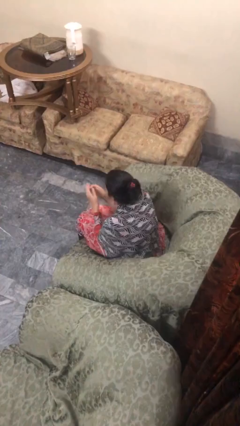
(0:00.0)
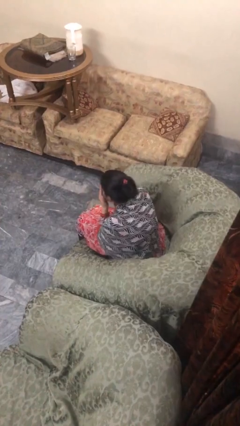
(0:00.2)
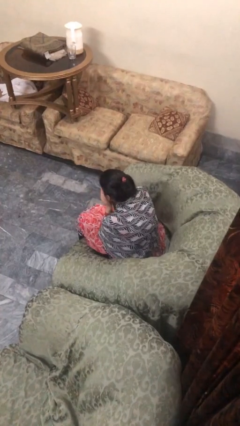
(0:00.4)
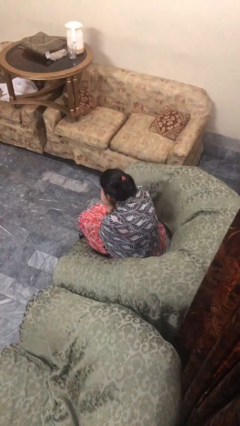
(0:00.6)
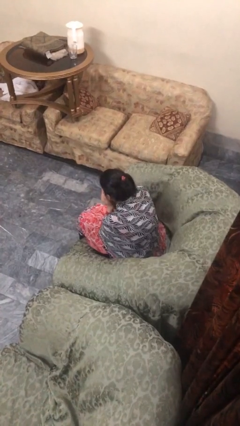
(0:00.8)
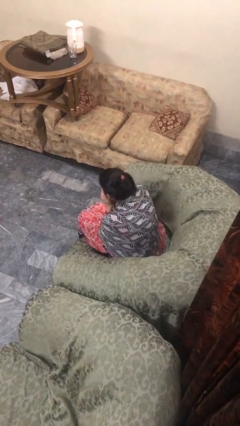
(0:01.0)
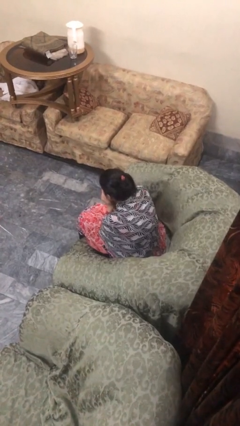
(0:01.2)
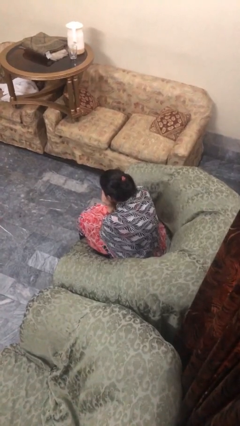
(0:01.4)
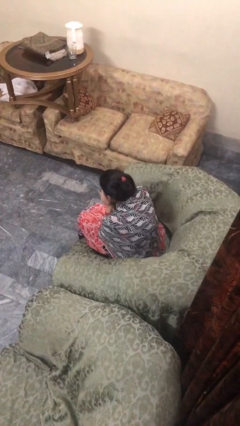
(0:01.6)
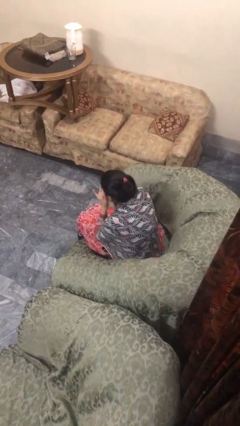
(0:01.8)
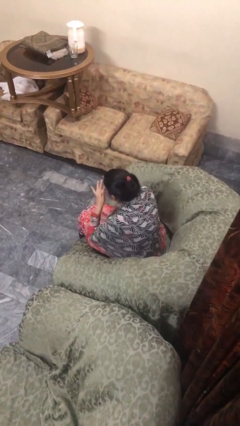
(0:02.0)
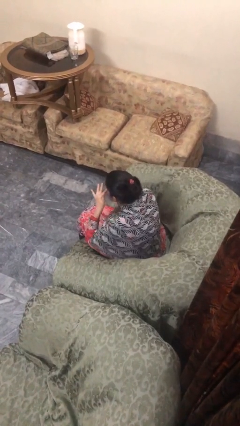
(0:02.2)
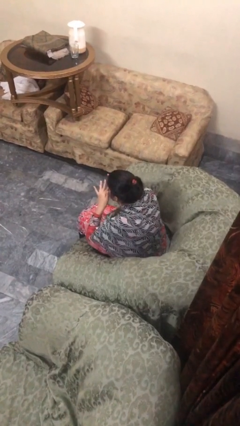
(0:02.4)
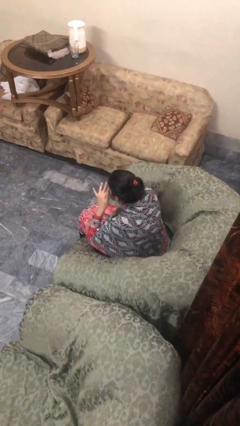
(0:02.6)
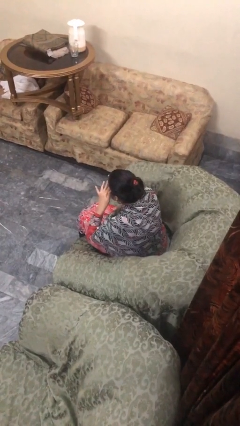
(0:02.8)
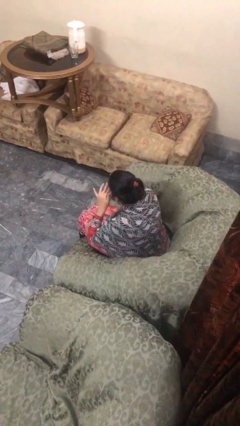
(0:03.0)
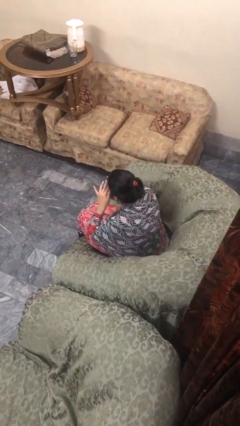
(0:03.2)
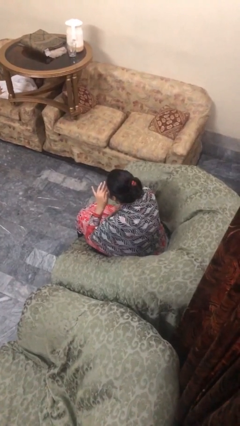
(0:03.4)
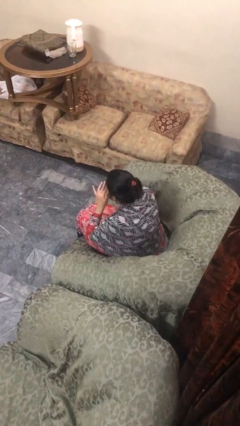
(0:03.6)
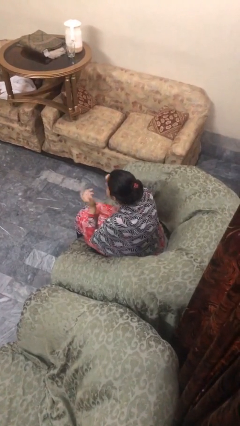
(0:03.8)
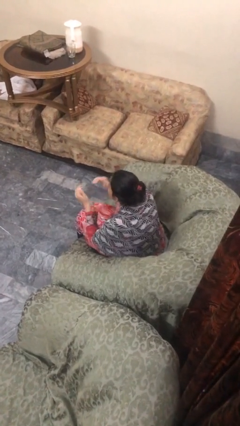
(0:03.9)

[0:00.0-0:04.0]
person rubs eyes

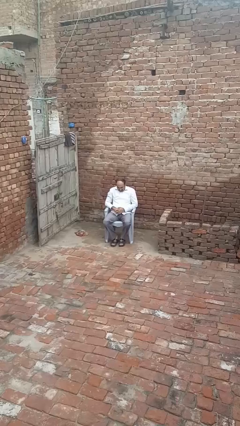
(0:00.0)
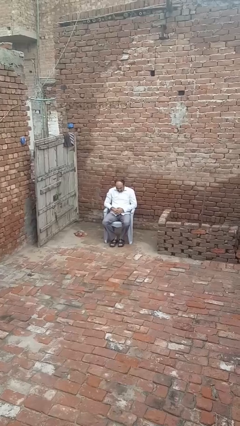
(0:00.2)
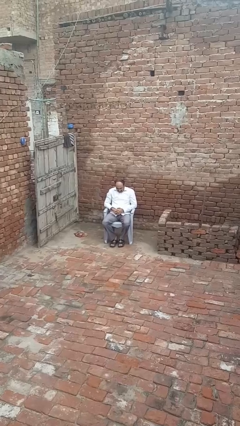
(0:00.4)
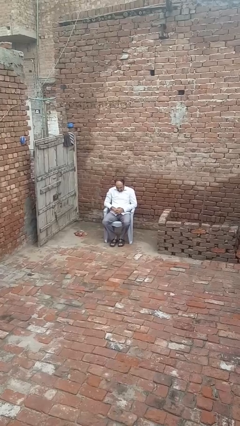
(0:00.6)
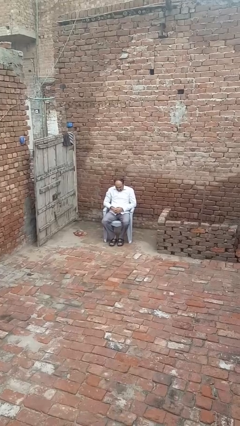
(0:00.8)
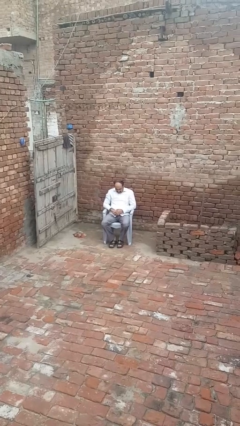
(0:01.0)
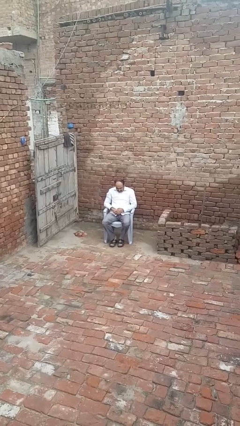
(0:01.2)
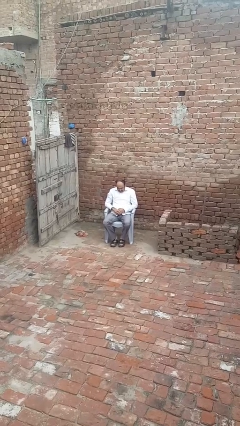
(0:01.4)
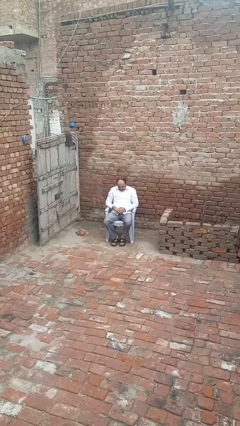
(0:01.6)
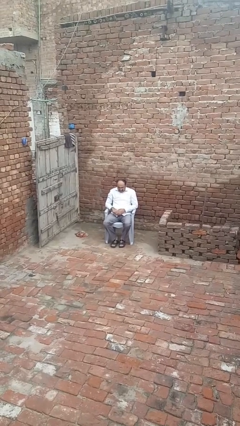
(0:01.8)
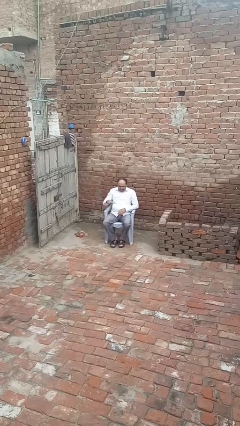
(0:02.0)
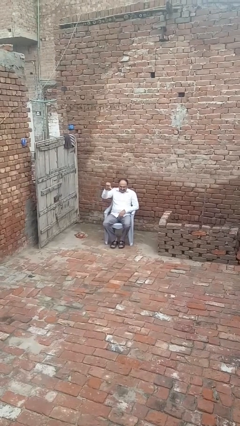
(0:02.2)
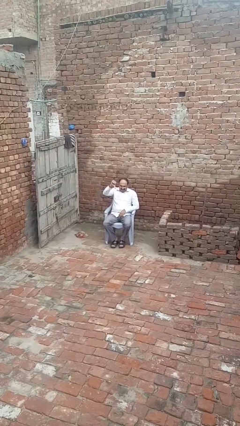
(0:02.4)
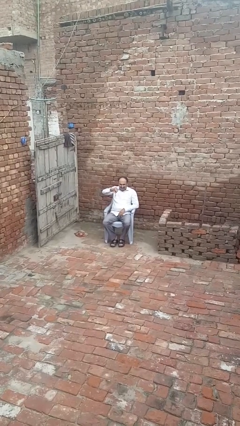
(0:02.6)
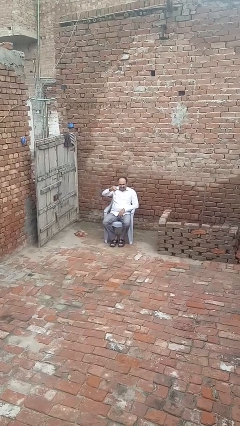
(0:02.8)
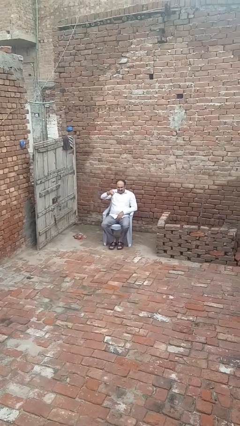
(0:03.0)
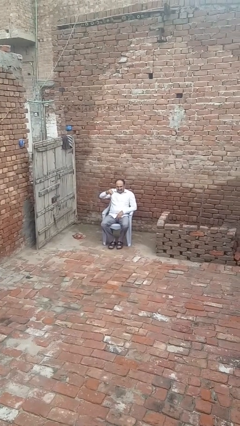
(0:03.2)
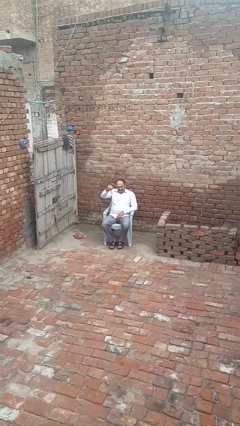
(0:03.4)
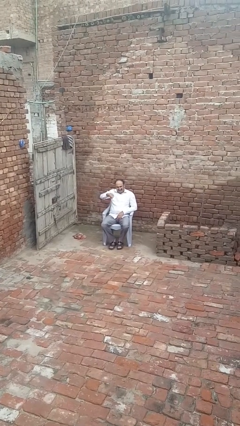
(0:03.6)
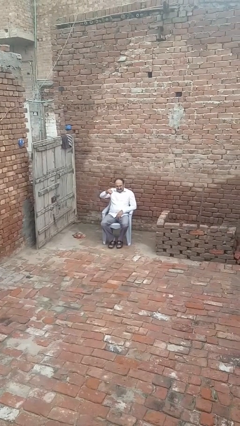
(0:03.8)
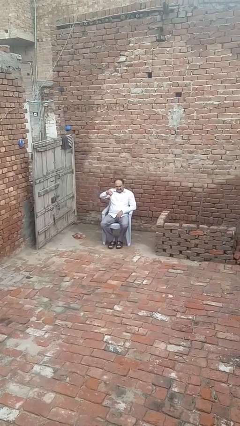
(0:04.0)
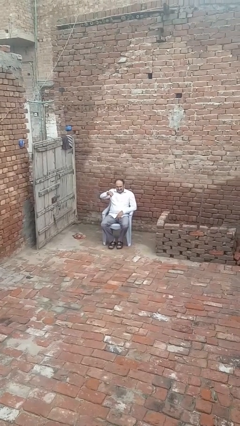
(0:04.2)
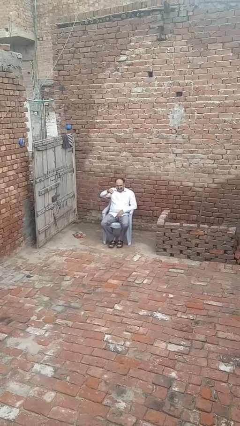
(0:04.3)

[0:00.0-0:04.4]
person gestures thumbs down

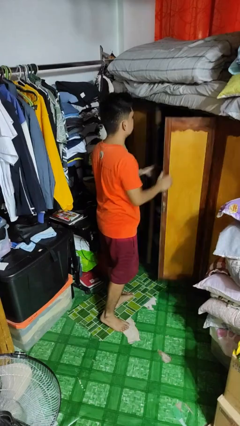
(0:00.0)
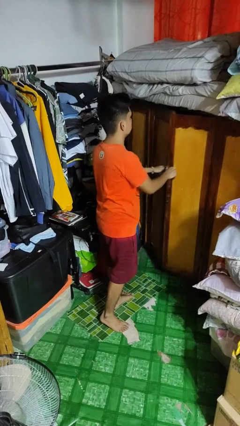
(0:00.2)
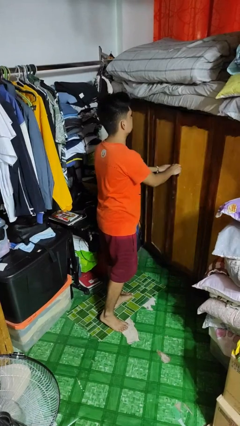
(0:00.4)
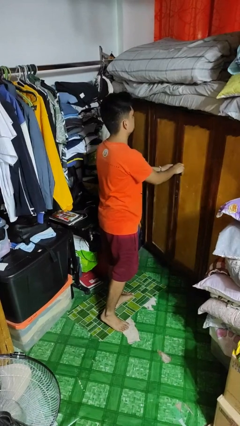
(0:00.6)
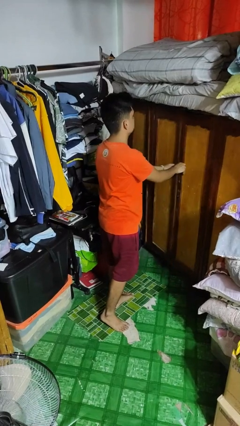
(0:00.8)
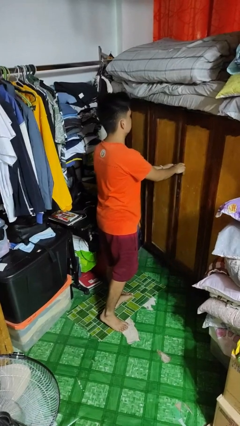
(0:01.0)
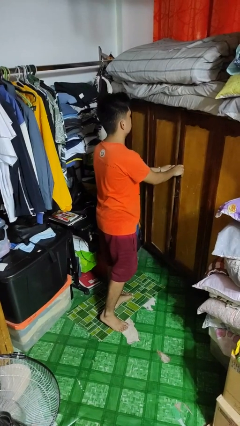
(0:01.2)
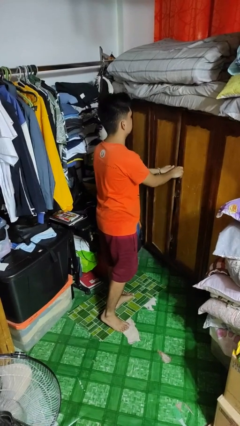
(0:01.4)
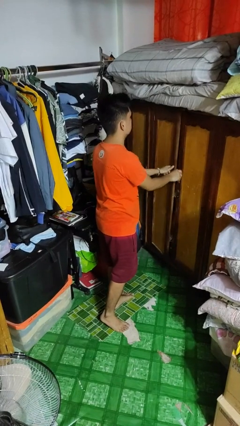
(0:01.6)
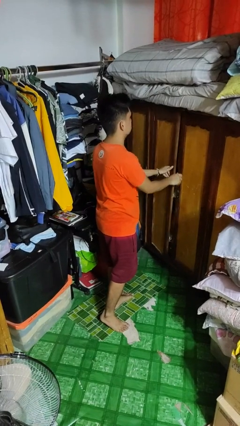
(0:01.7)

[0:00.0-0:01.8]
person closes closet door

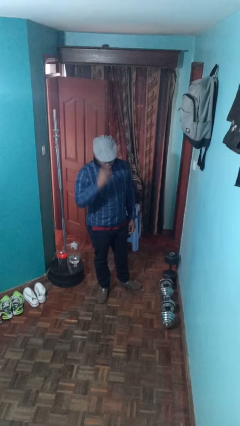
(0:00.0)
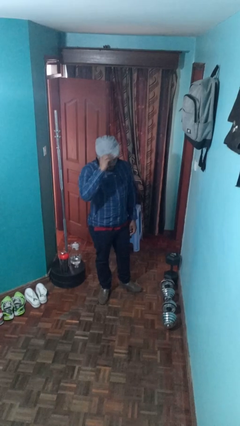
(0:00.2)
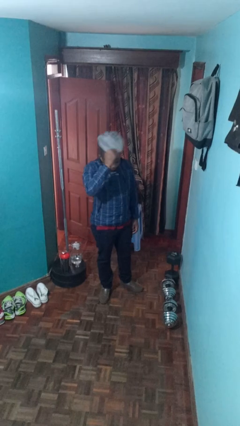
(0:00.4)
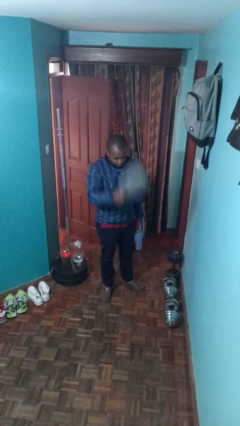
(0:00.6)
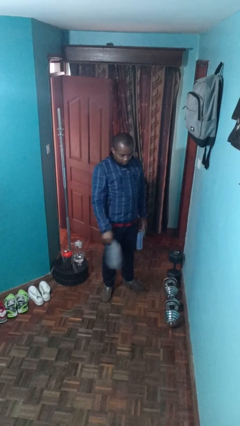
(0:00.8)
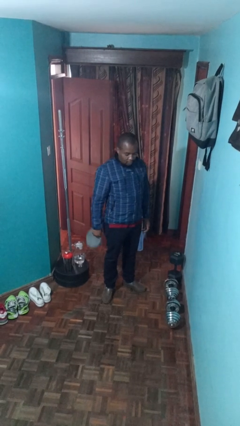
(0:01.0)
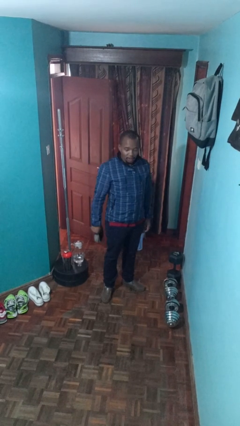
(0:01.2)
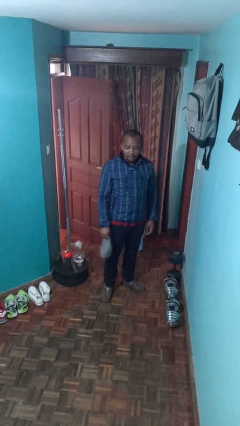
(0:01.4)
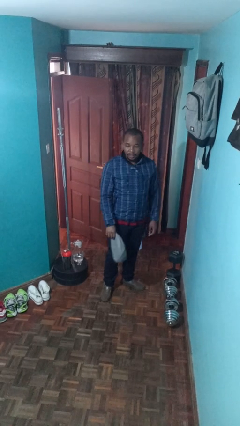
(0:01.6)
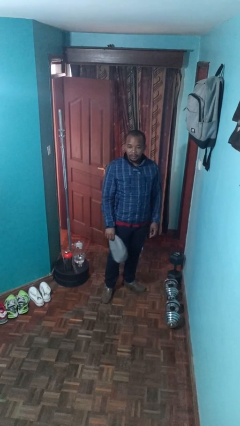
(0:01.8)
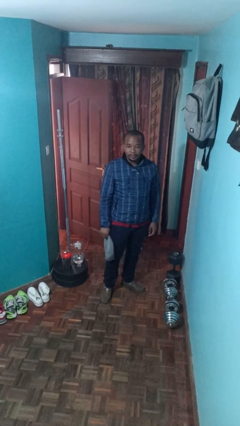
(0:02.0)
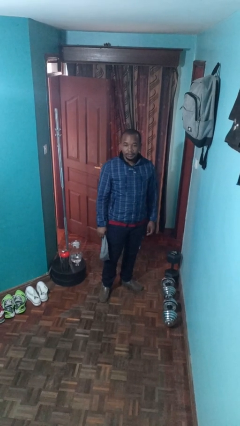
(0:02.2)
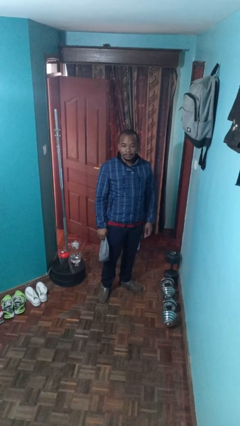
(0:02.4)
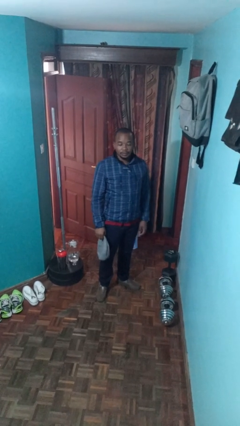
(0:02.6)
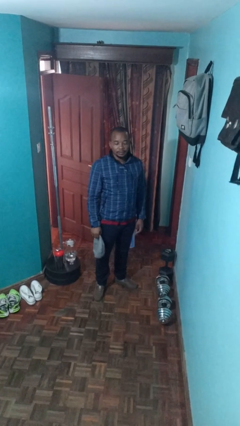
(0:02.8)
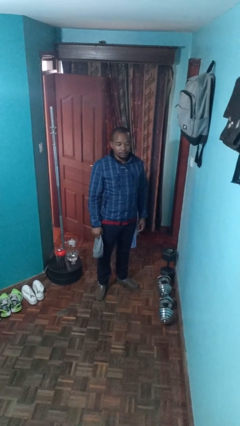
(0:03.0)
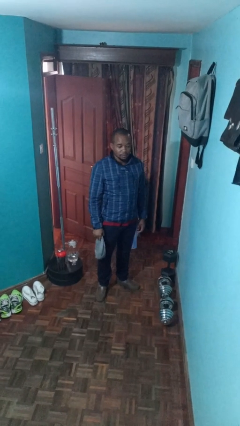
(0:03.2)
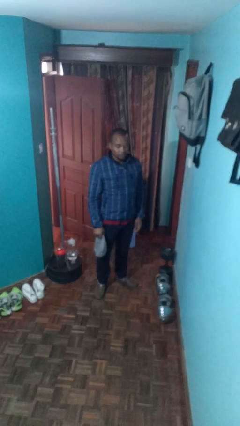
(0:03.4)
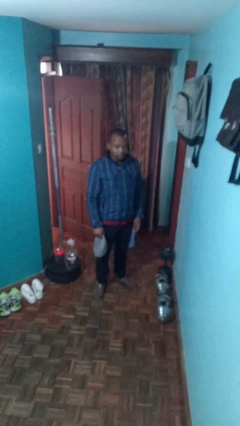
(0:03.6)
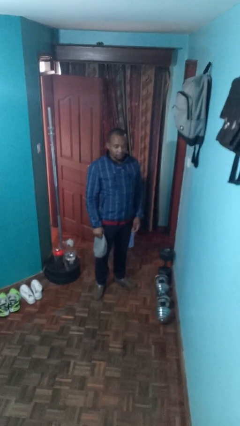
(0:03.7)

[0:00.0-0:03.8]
person takes off hat

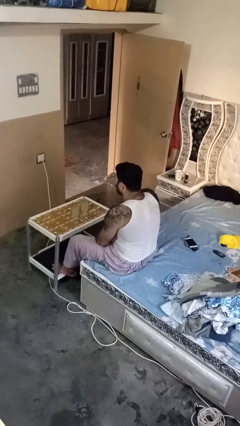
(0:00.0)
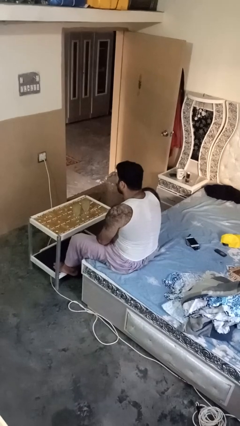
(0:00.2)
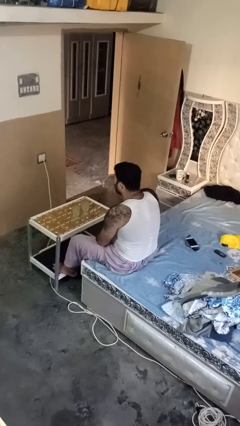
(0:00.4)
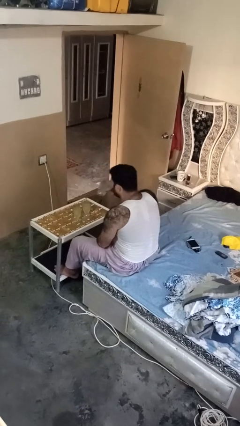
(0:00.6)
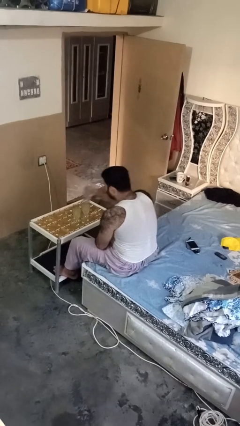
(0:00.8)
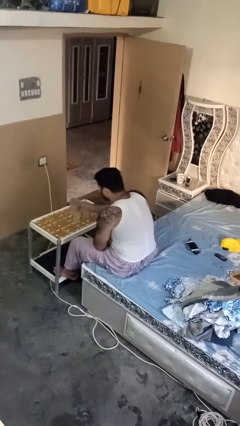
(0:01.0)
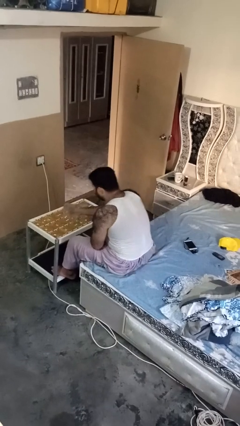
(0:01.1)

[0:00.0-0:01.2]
person puts down object on table

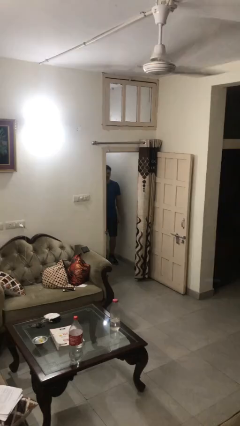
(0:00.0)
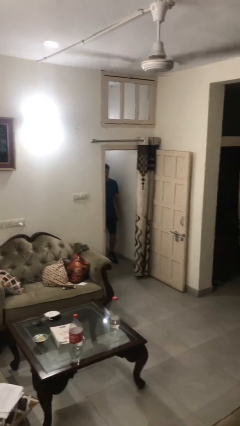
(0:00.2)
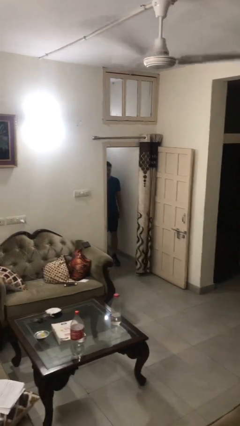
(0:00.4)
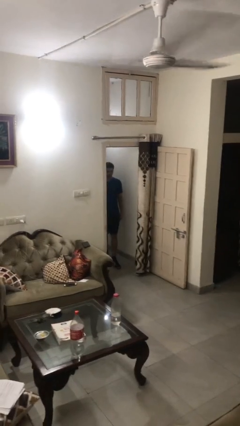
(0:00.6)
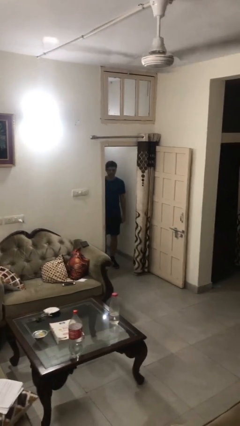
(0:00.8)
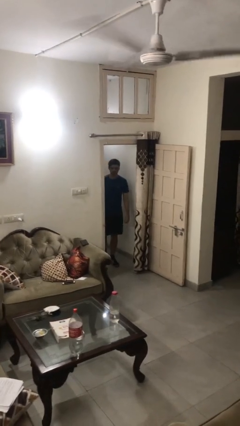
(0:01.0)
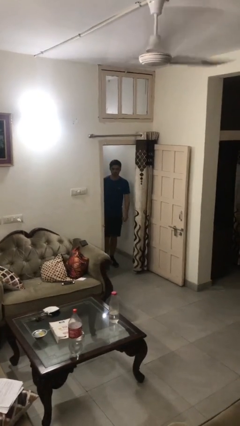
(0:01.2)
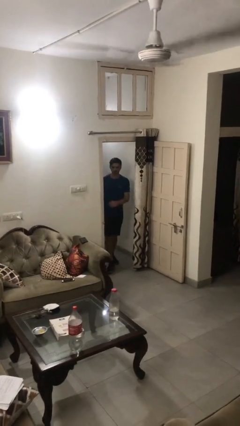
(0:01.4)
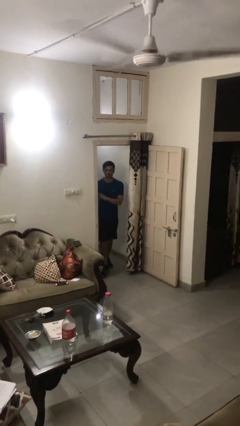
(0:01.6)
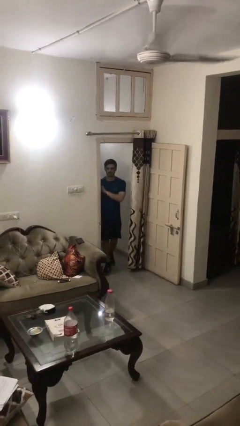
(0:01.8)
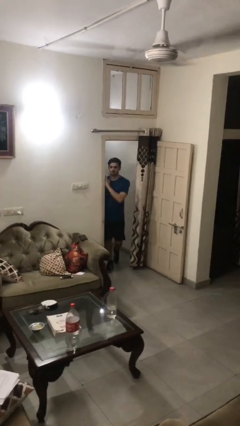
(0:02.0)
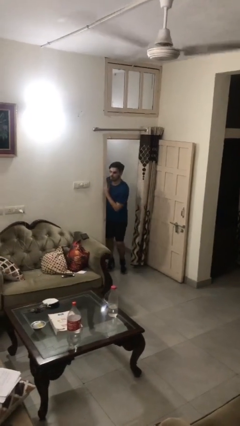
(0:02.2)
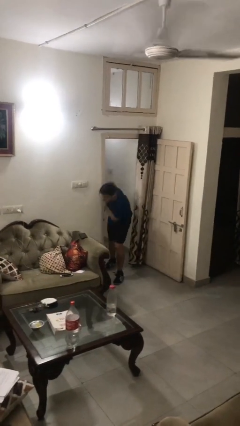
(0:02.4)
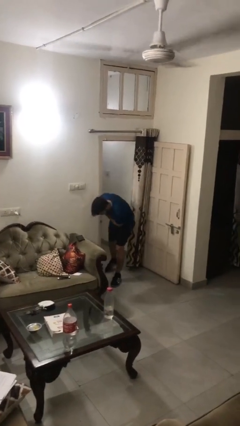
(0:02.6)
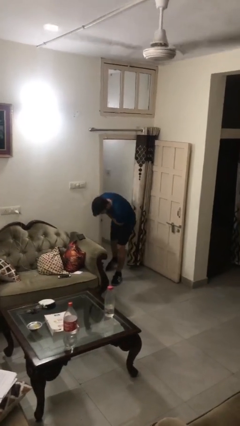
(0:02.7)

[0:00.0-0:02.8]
person bumps into wall
